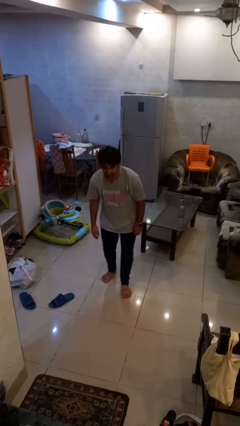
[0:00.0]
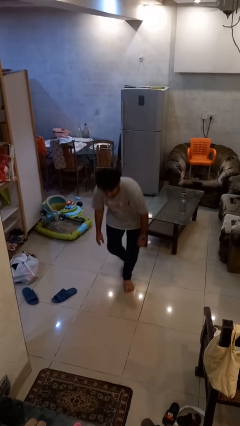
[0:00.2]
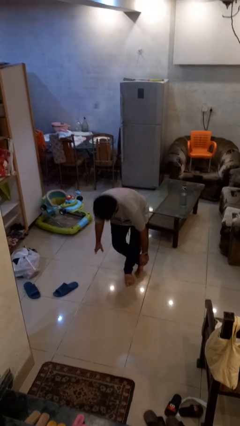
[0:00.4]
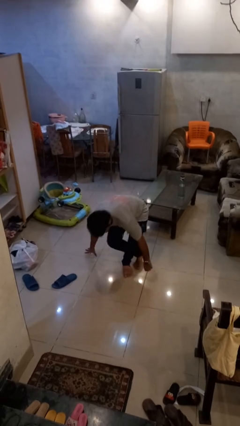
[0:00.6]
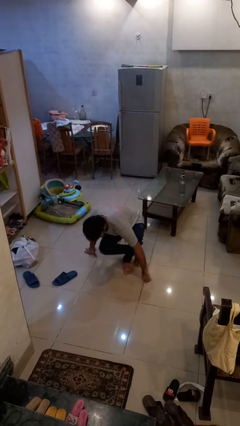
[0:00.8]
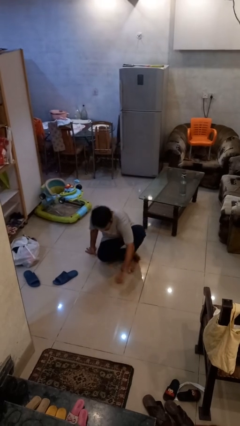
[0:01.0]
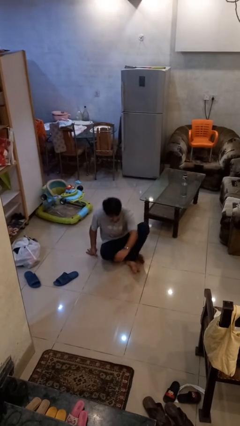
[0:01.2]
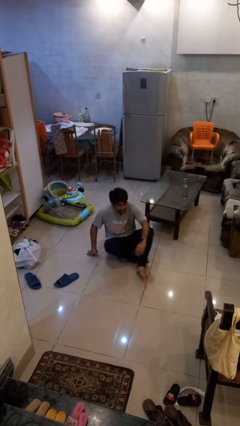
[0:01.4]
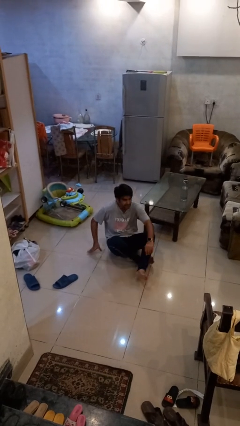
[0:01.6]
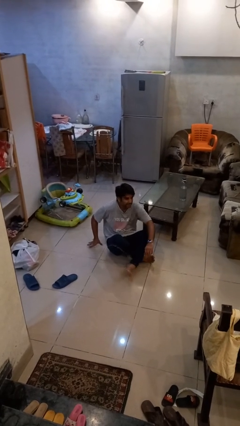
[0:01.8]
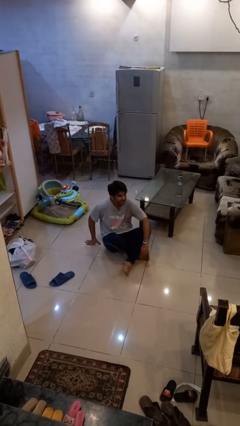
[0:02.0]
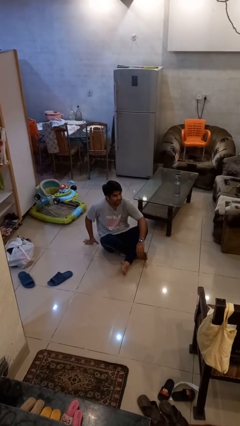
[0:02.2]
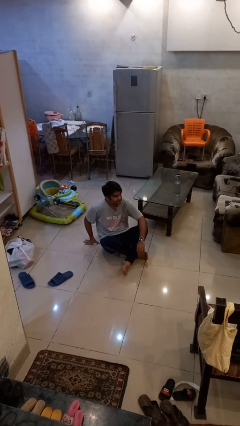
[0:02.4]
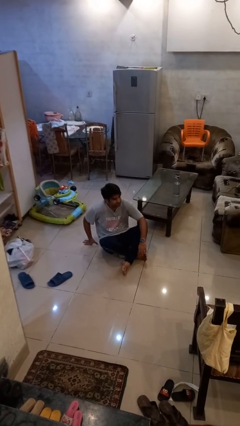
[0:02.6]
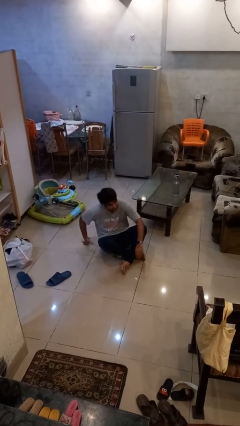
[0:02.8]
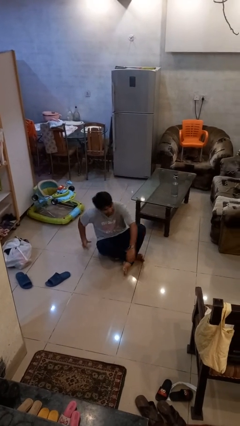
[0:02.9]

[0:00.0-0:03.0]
person sits crisscross

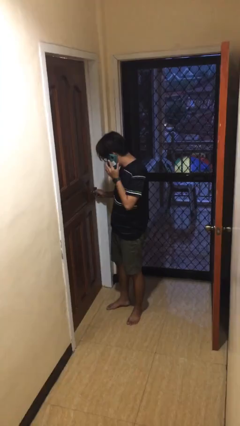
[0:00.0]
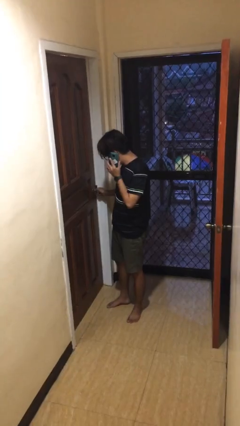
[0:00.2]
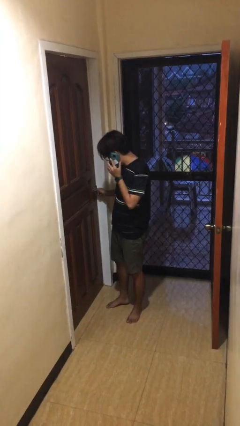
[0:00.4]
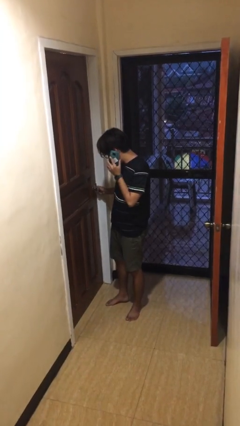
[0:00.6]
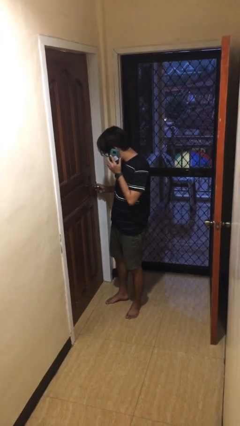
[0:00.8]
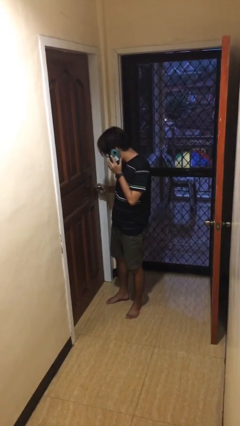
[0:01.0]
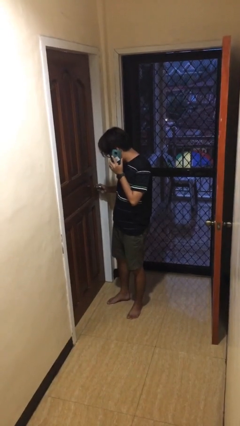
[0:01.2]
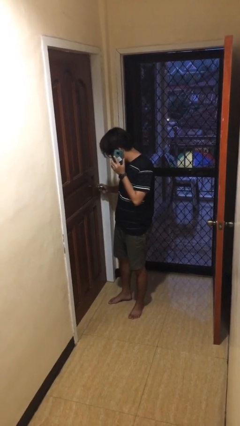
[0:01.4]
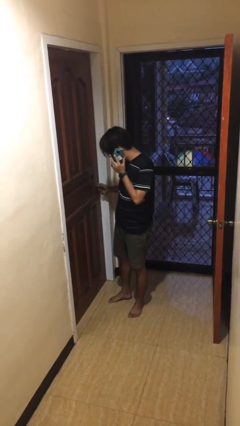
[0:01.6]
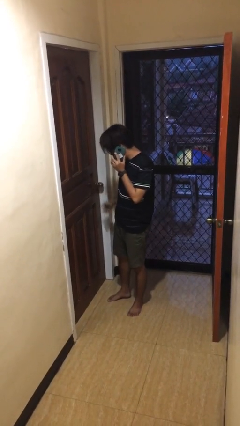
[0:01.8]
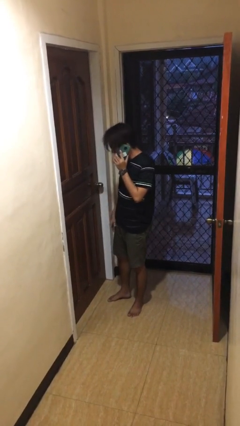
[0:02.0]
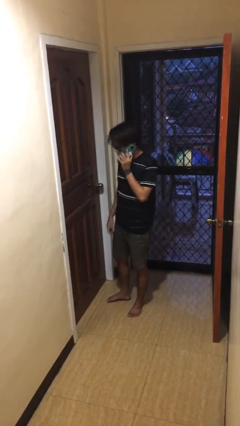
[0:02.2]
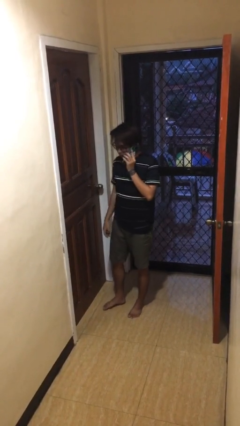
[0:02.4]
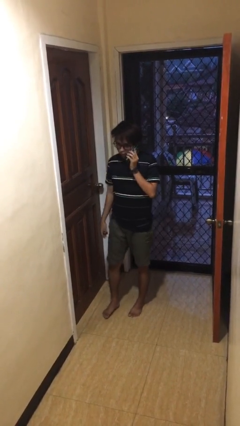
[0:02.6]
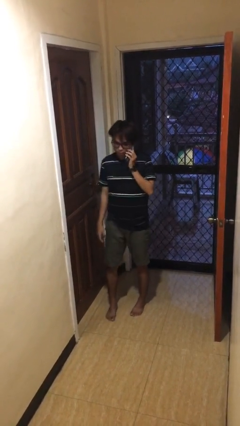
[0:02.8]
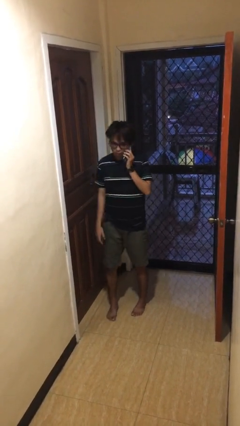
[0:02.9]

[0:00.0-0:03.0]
person closes facility door

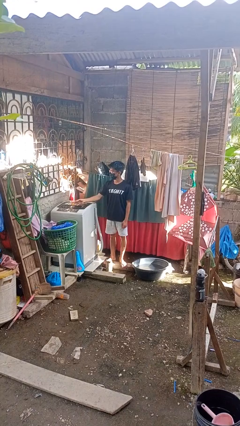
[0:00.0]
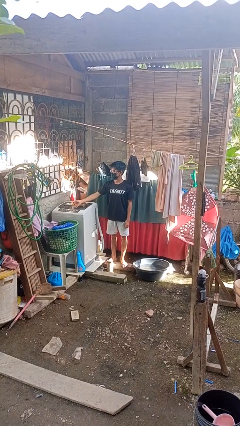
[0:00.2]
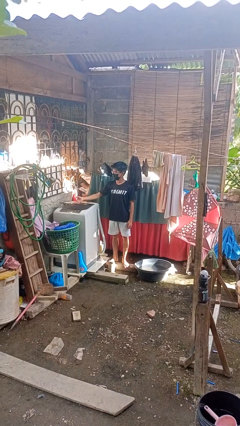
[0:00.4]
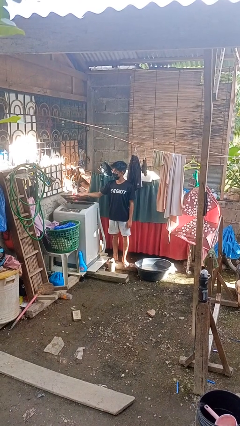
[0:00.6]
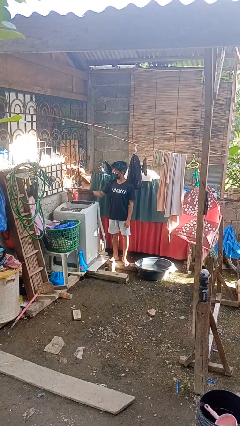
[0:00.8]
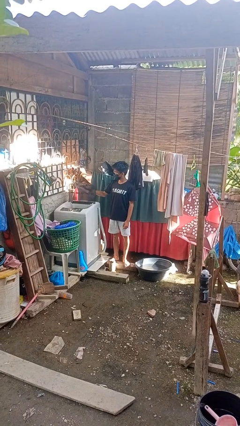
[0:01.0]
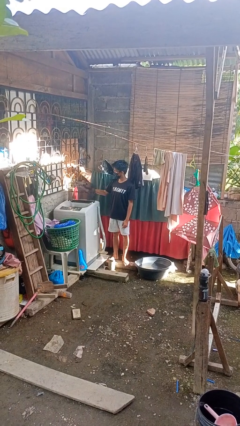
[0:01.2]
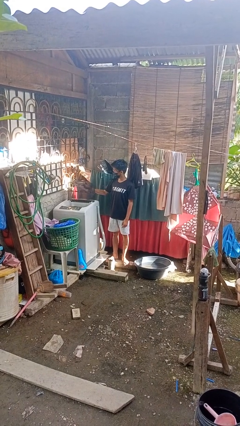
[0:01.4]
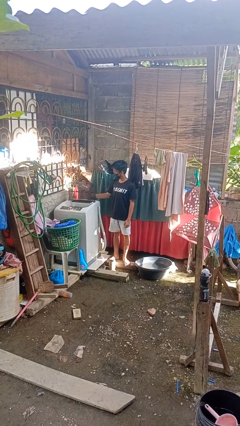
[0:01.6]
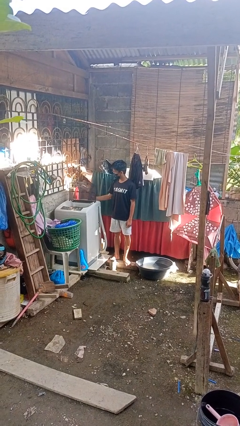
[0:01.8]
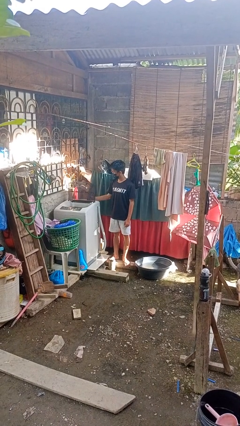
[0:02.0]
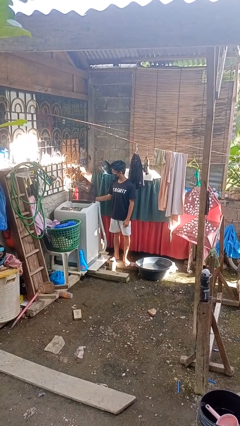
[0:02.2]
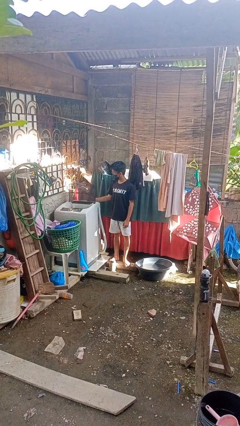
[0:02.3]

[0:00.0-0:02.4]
person opens clothes washer

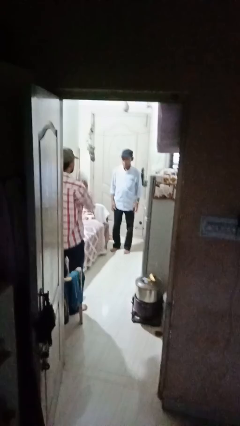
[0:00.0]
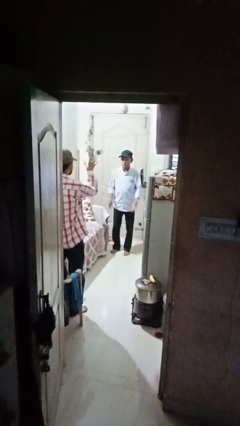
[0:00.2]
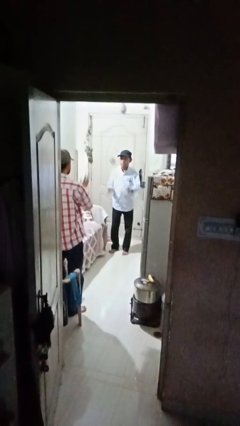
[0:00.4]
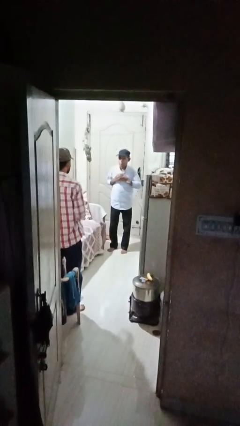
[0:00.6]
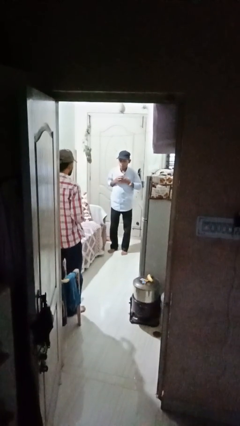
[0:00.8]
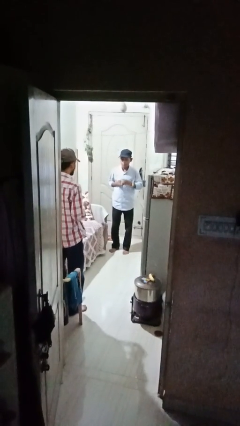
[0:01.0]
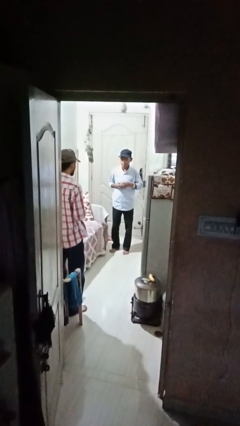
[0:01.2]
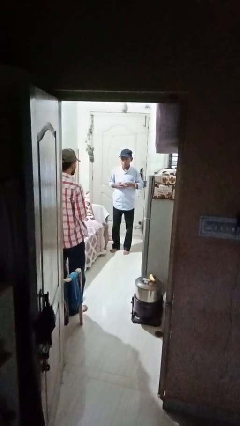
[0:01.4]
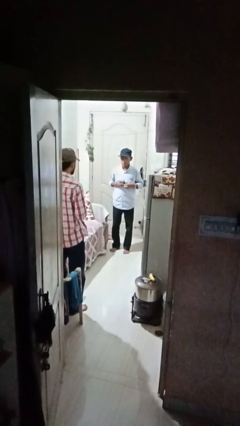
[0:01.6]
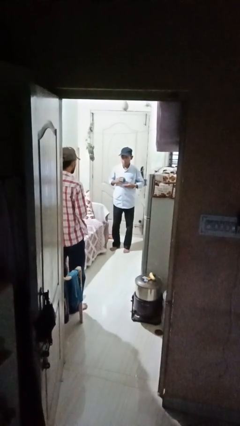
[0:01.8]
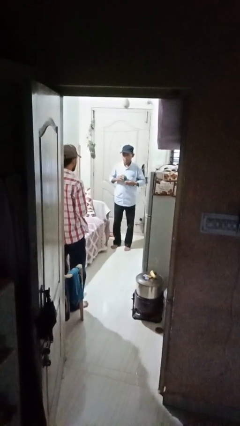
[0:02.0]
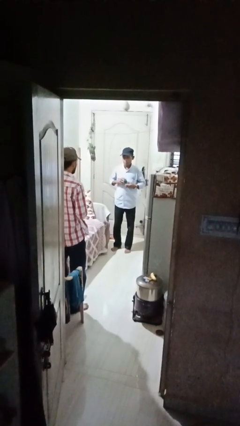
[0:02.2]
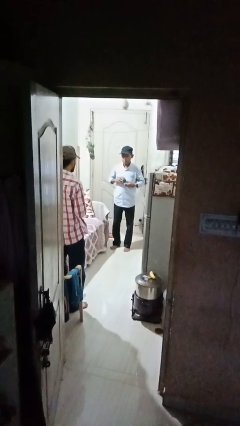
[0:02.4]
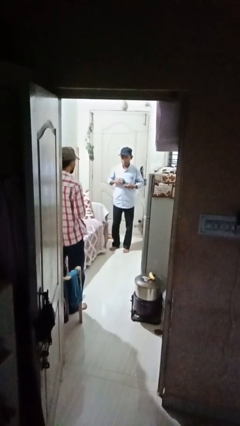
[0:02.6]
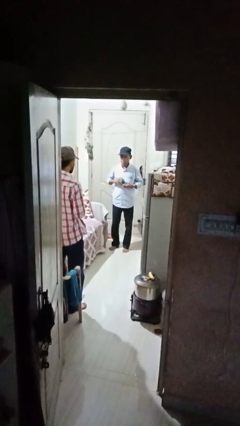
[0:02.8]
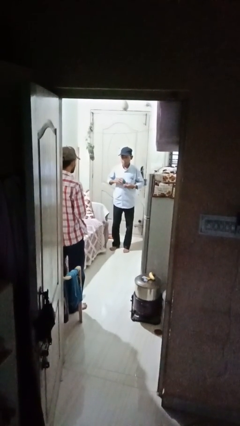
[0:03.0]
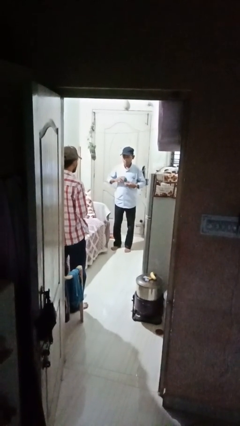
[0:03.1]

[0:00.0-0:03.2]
person catches object from person

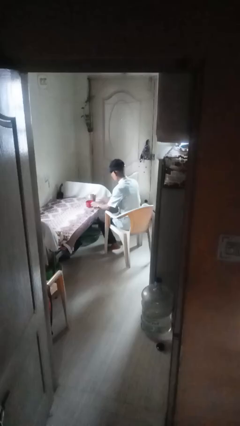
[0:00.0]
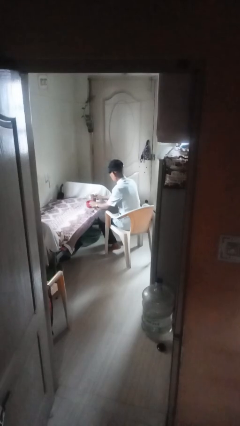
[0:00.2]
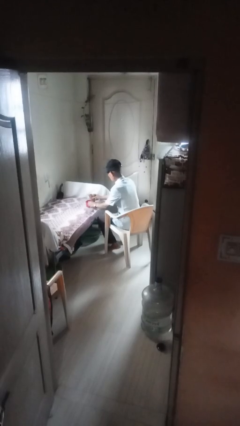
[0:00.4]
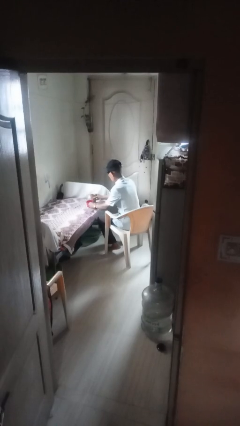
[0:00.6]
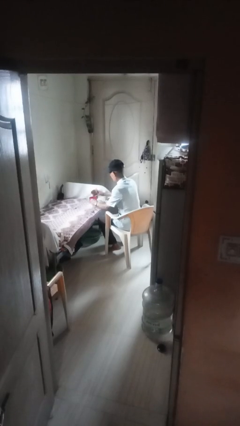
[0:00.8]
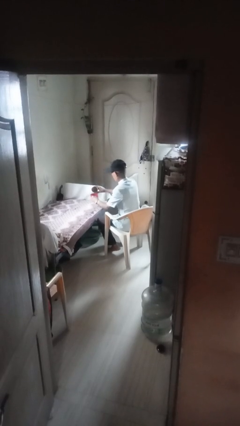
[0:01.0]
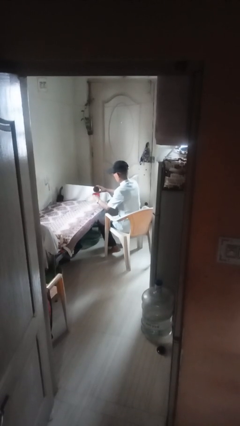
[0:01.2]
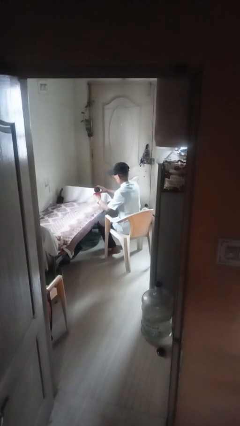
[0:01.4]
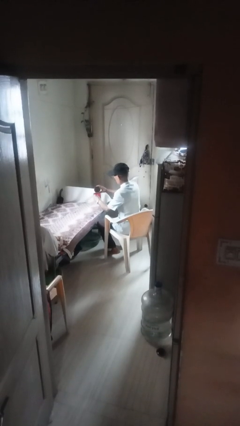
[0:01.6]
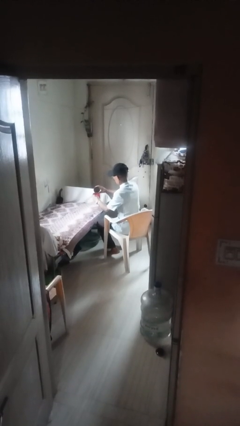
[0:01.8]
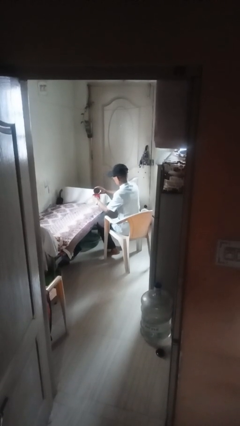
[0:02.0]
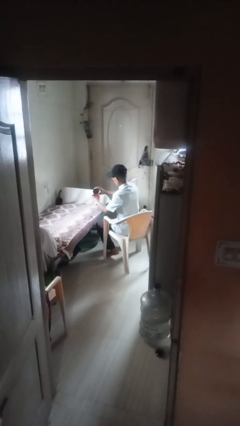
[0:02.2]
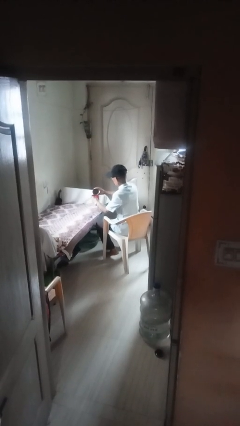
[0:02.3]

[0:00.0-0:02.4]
person pours coffee into mug

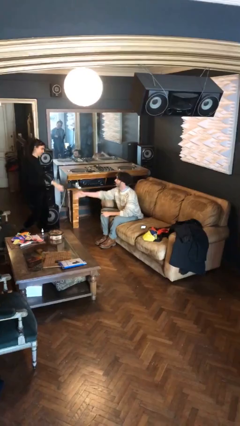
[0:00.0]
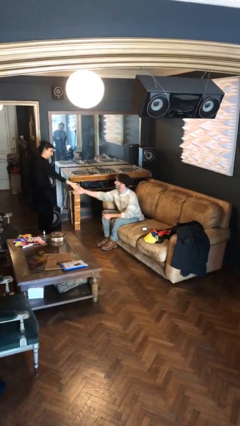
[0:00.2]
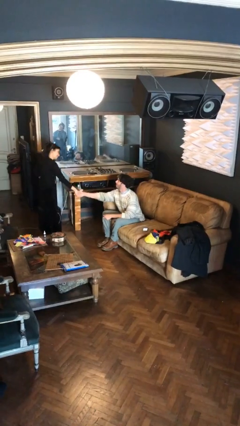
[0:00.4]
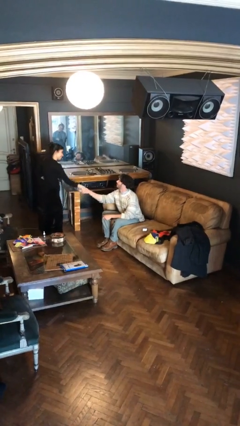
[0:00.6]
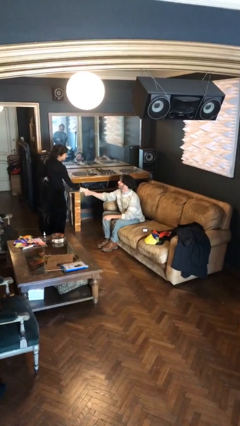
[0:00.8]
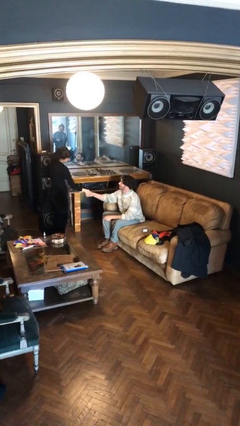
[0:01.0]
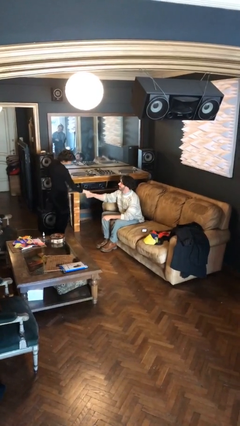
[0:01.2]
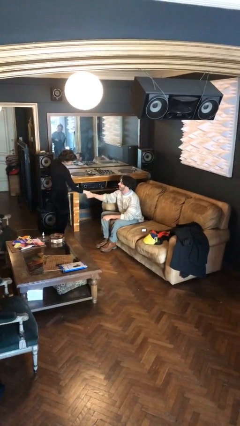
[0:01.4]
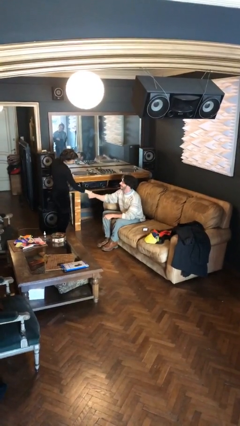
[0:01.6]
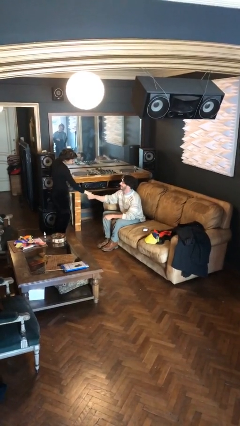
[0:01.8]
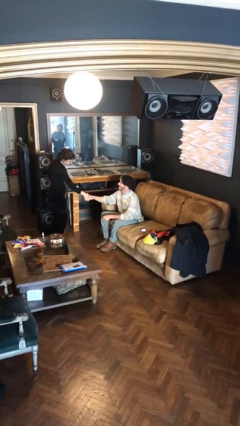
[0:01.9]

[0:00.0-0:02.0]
person shakes hand

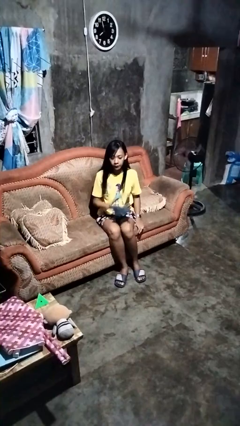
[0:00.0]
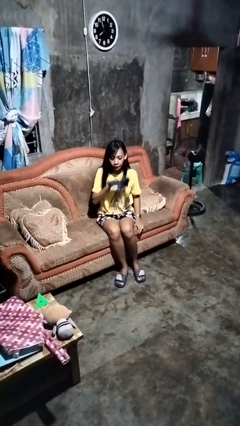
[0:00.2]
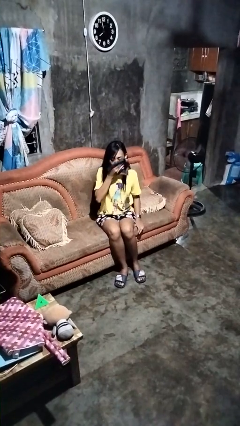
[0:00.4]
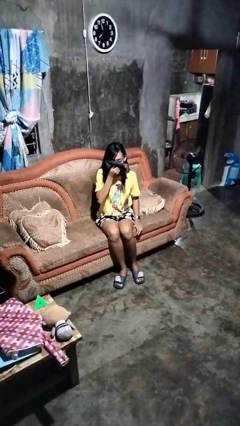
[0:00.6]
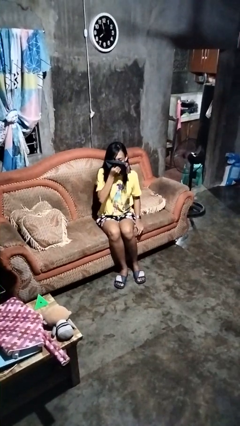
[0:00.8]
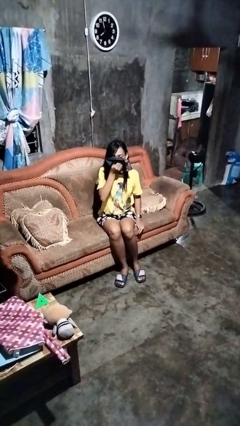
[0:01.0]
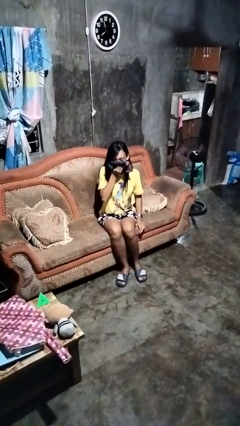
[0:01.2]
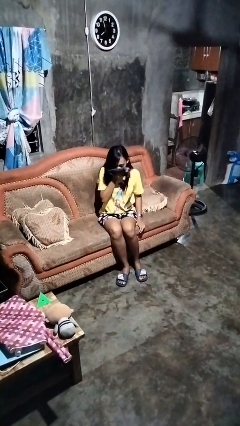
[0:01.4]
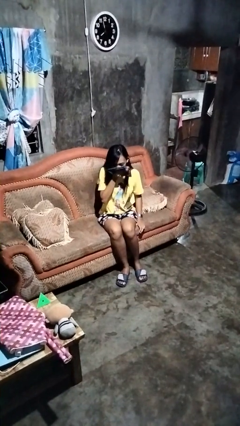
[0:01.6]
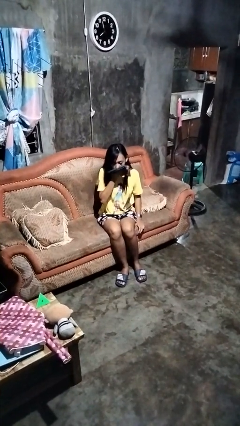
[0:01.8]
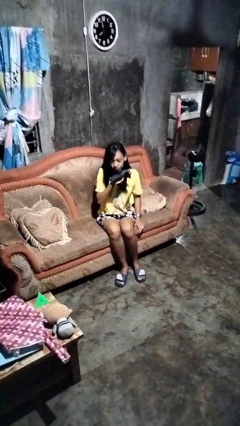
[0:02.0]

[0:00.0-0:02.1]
person blows nose
